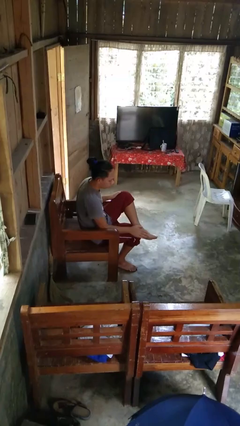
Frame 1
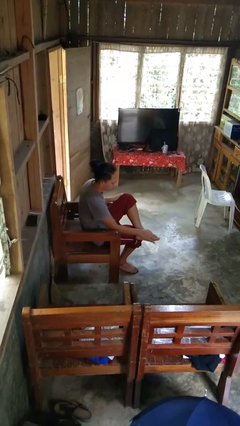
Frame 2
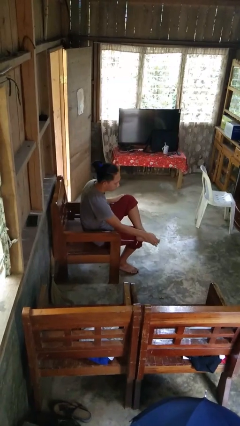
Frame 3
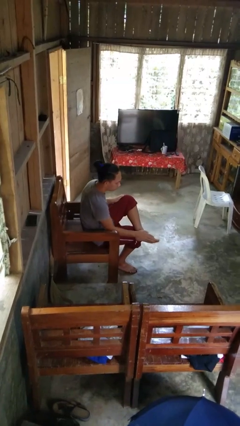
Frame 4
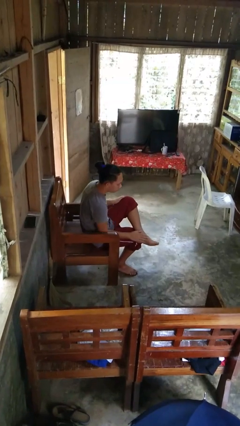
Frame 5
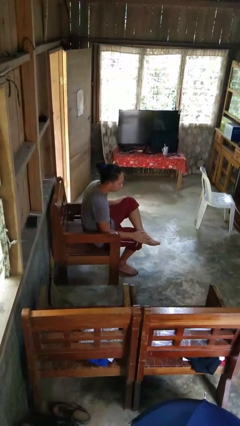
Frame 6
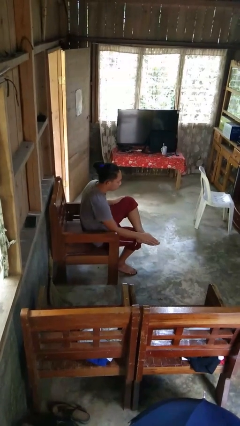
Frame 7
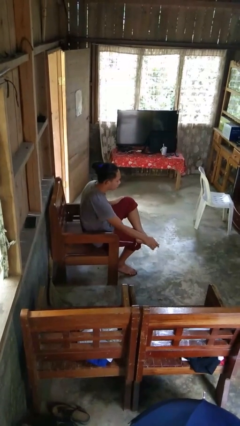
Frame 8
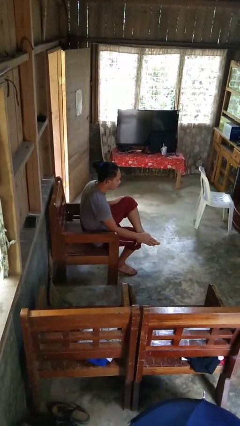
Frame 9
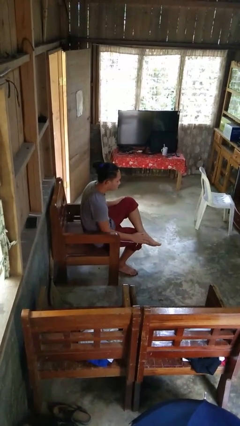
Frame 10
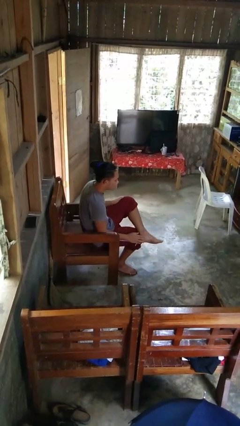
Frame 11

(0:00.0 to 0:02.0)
person rubs foot

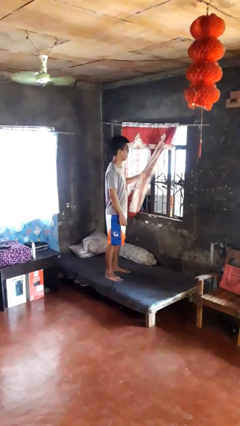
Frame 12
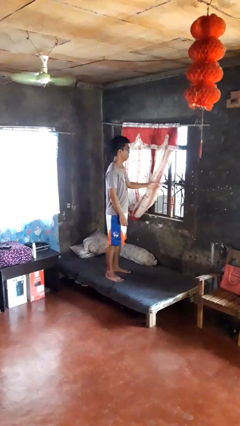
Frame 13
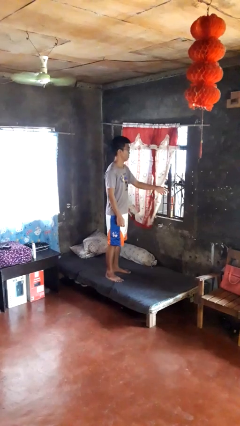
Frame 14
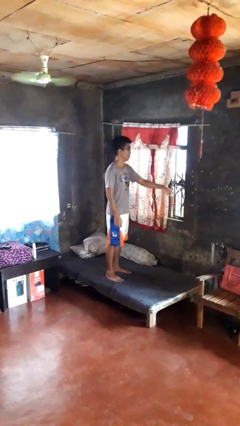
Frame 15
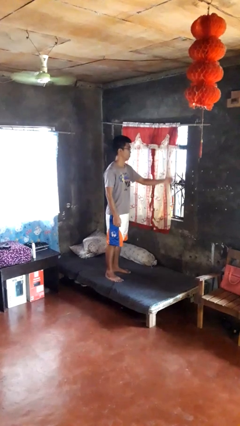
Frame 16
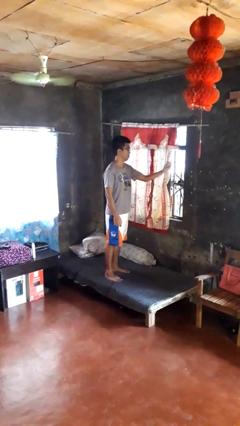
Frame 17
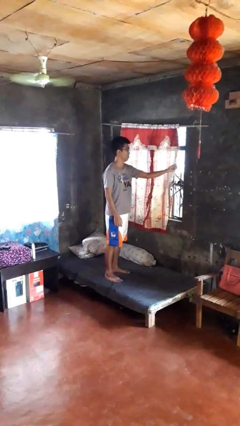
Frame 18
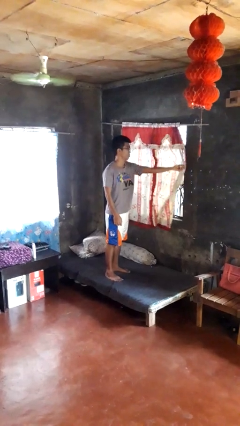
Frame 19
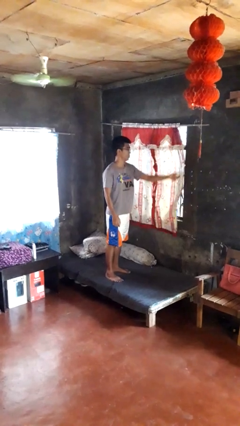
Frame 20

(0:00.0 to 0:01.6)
person closes curtains

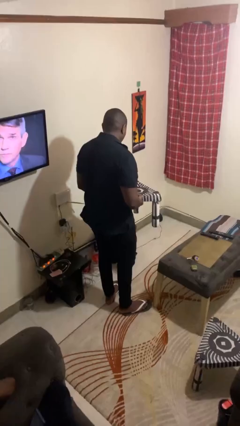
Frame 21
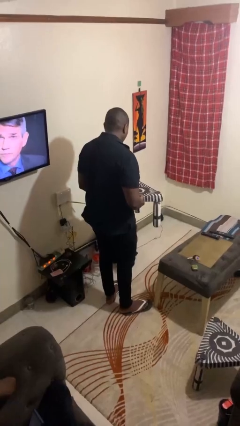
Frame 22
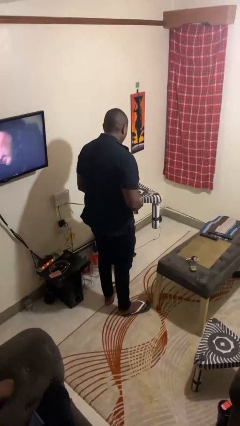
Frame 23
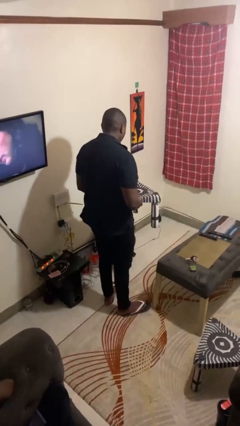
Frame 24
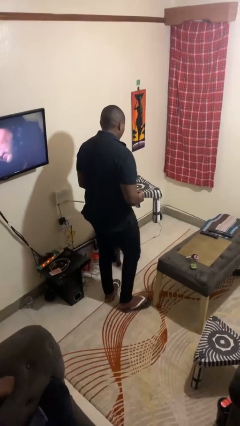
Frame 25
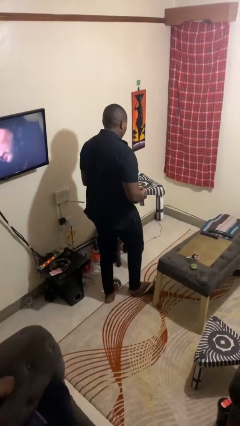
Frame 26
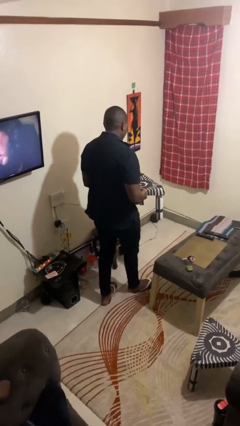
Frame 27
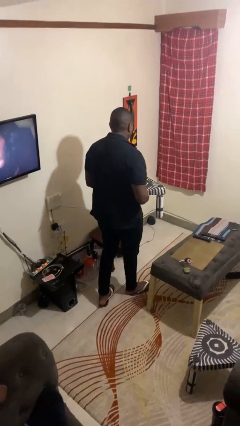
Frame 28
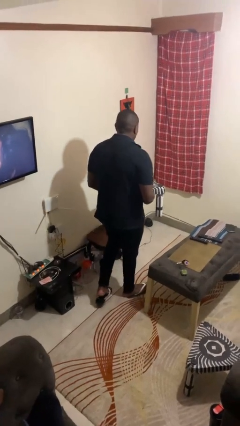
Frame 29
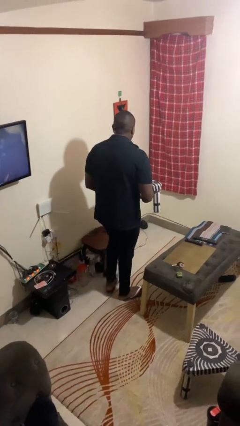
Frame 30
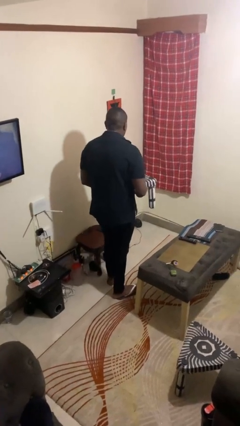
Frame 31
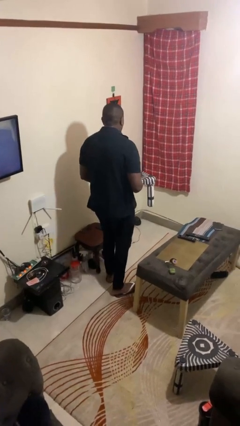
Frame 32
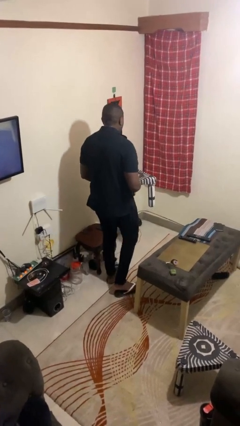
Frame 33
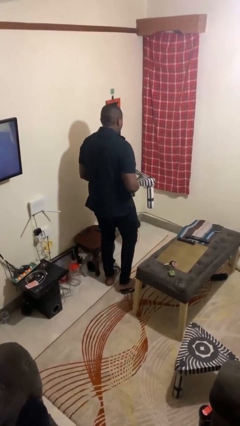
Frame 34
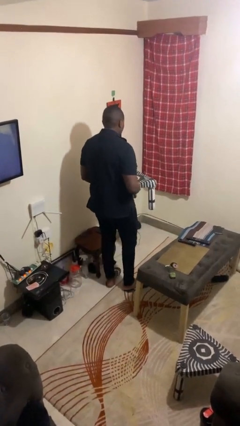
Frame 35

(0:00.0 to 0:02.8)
person carries groceries

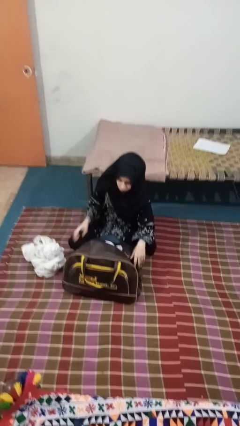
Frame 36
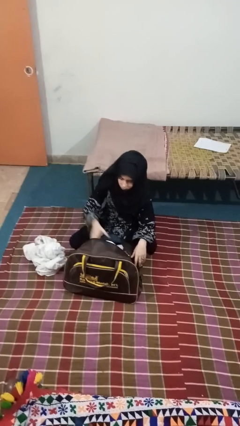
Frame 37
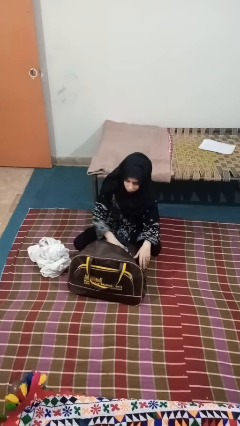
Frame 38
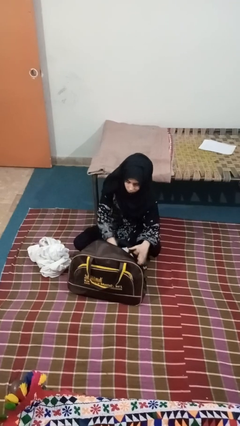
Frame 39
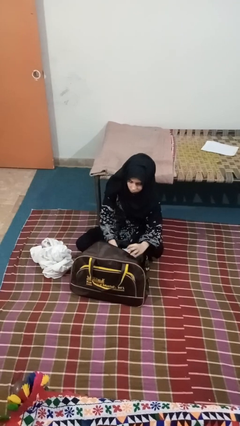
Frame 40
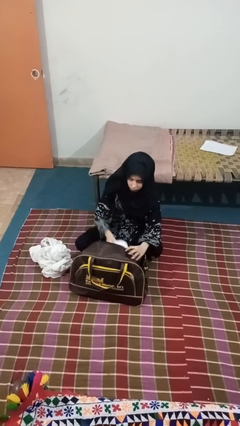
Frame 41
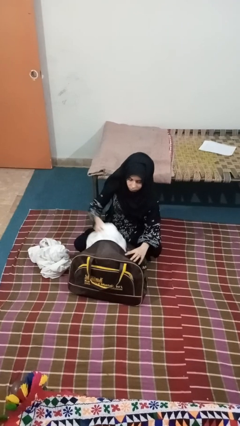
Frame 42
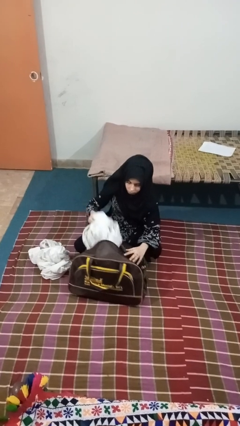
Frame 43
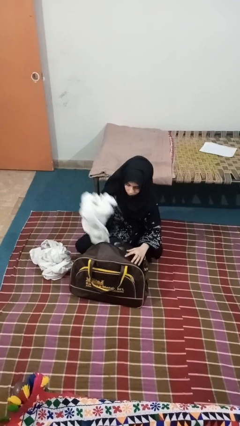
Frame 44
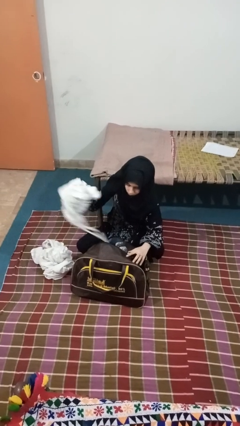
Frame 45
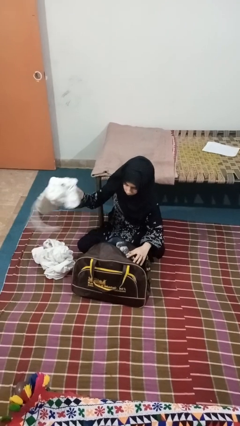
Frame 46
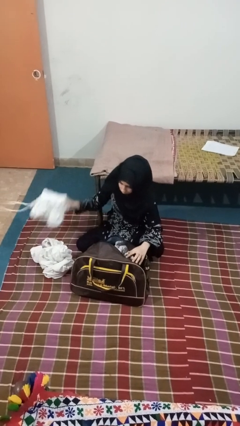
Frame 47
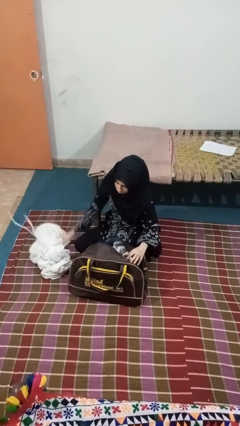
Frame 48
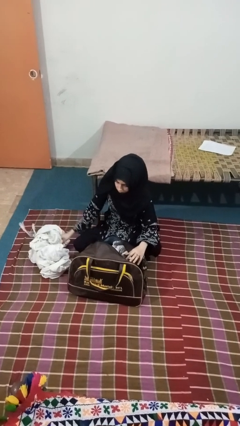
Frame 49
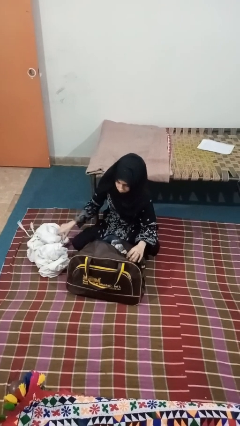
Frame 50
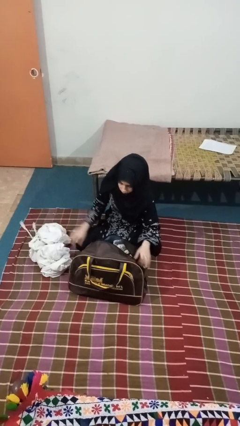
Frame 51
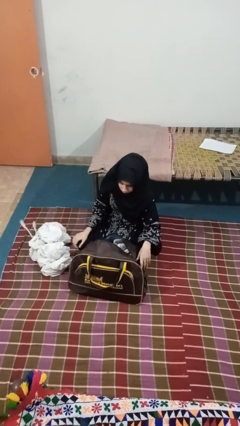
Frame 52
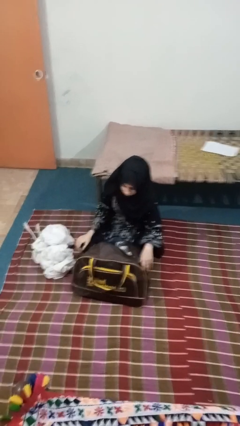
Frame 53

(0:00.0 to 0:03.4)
person unloads clothes from suitcase

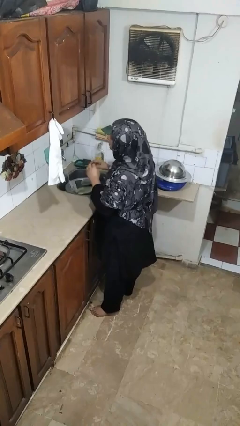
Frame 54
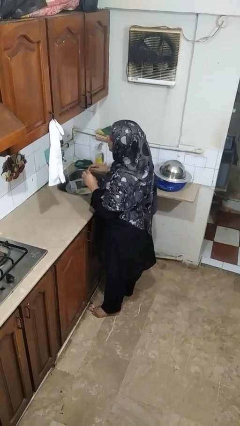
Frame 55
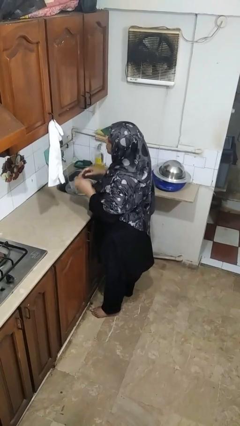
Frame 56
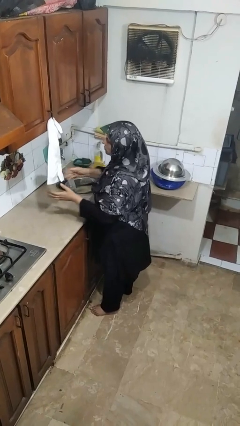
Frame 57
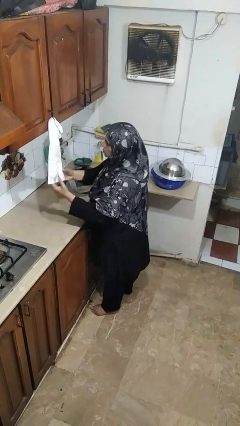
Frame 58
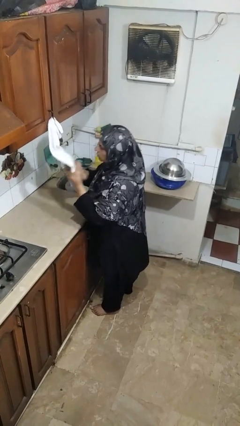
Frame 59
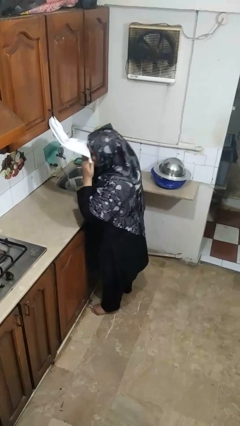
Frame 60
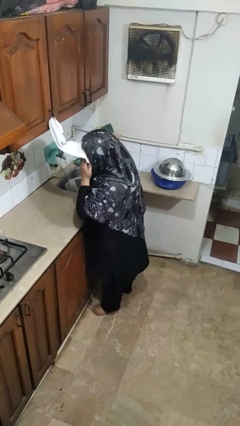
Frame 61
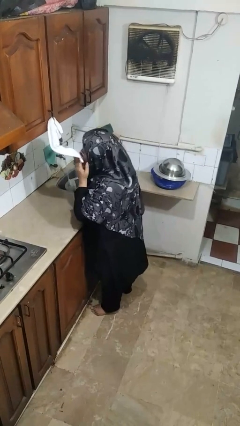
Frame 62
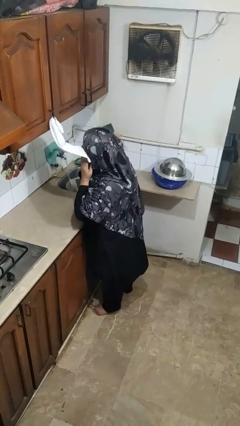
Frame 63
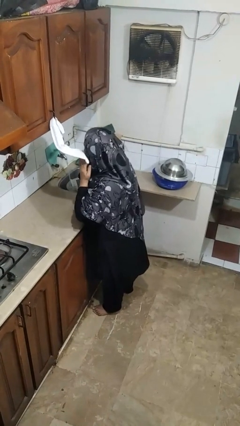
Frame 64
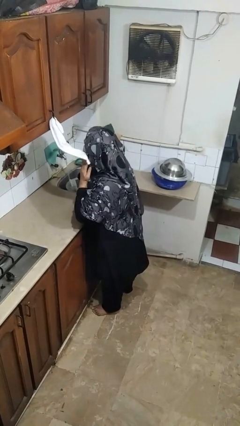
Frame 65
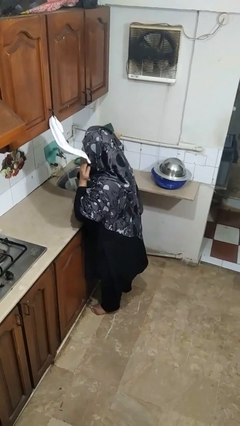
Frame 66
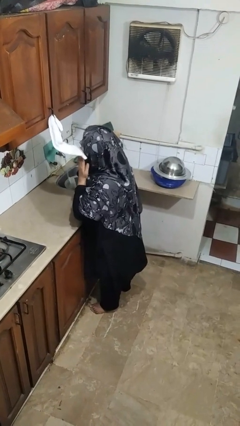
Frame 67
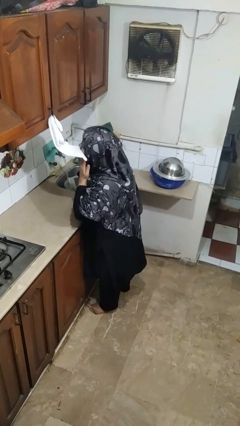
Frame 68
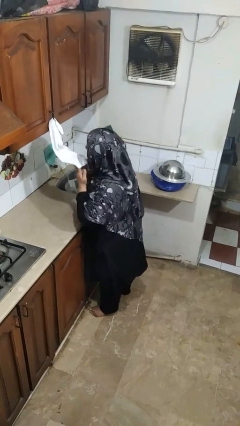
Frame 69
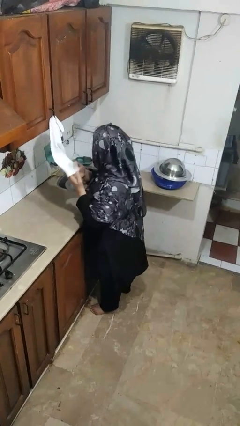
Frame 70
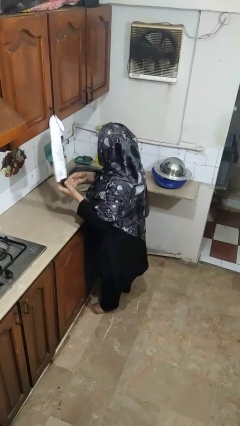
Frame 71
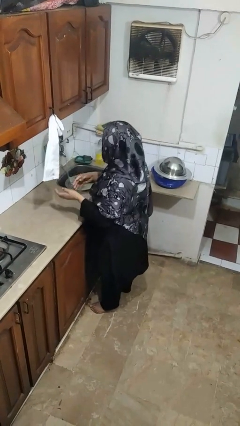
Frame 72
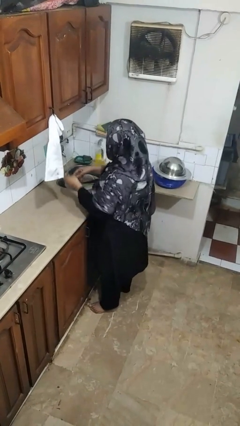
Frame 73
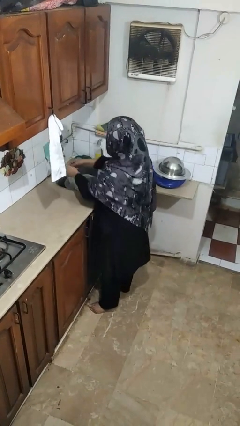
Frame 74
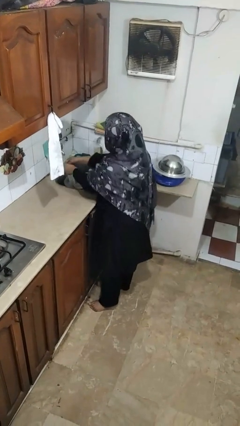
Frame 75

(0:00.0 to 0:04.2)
person dries face with towel

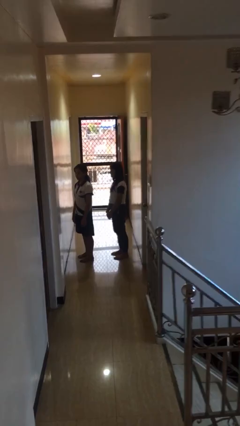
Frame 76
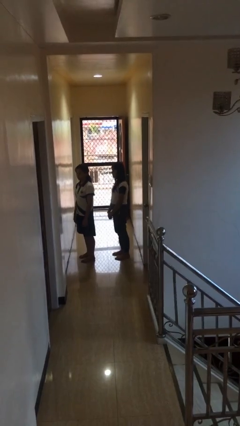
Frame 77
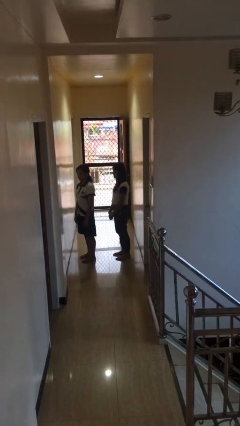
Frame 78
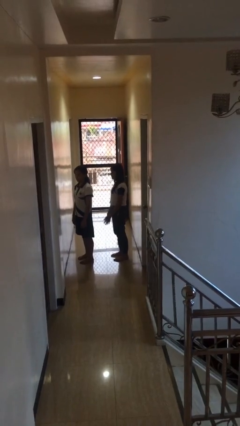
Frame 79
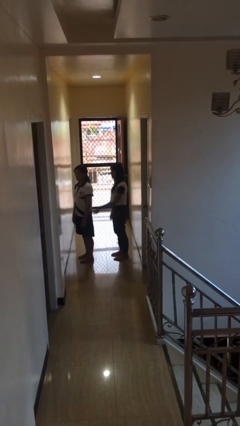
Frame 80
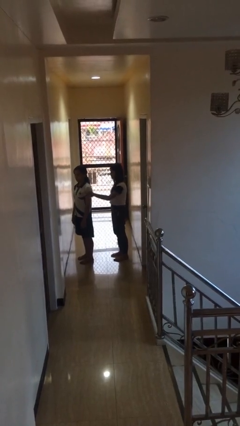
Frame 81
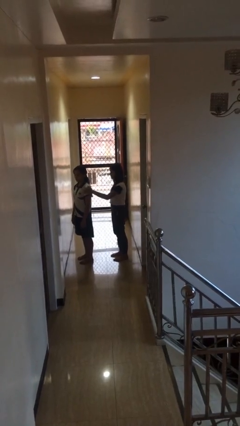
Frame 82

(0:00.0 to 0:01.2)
person grabs person by shoulder

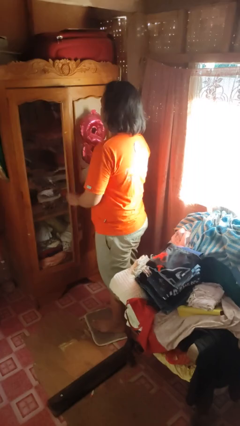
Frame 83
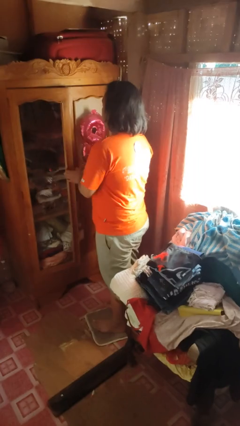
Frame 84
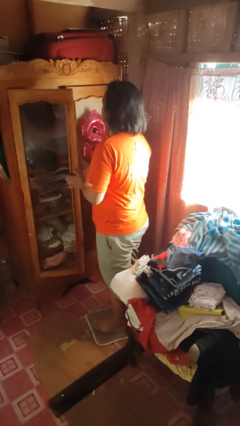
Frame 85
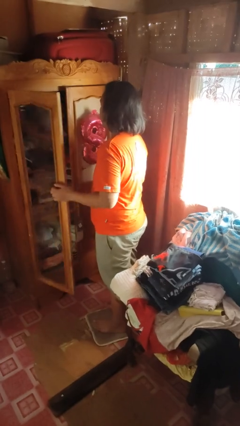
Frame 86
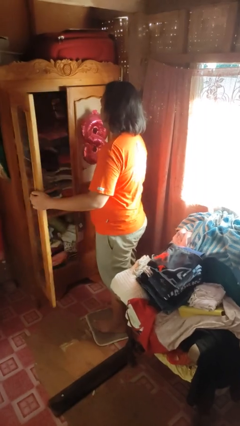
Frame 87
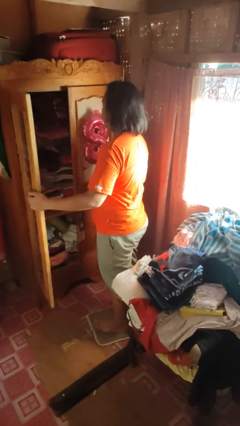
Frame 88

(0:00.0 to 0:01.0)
person opens dresser drawer

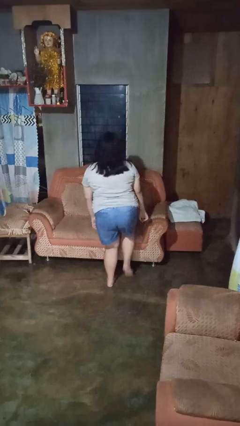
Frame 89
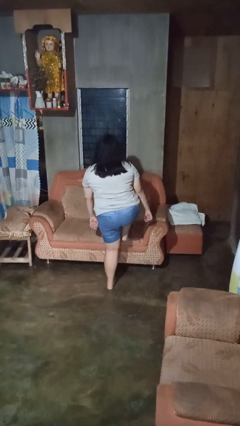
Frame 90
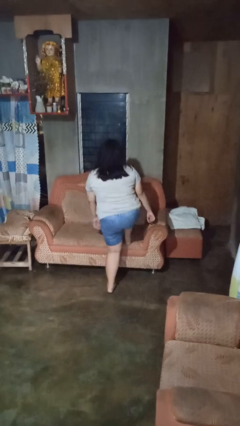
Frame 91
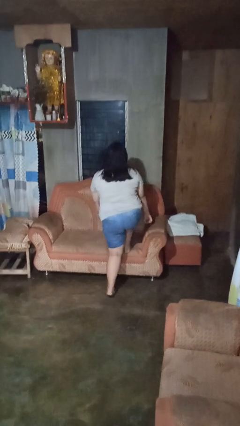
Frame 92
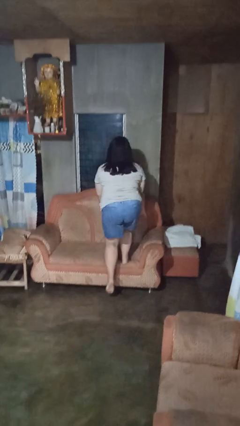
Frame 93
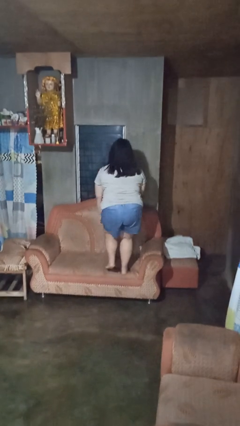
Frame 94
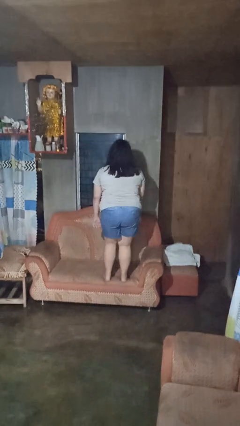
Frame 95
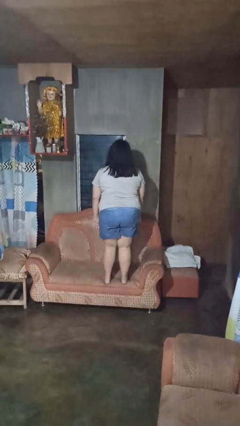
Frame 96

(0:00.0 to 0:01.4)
person climbs on couch
